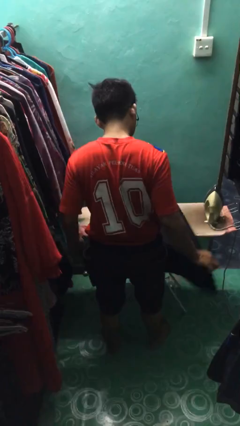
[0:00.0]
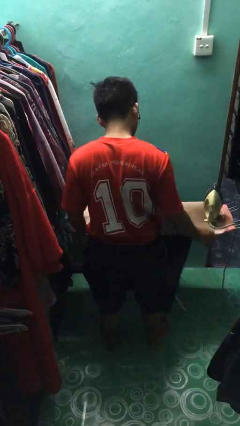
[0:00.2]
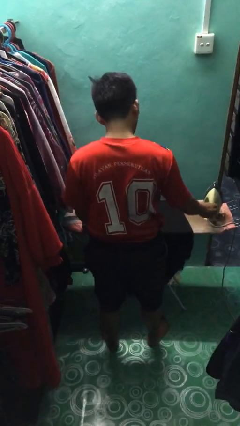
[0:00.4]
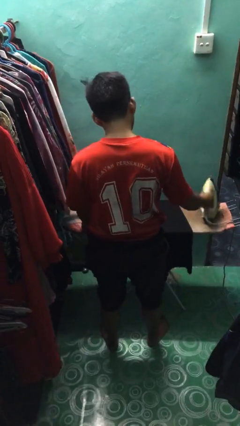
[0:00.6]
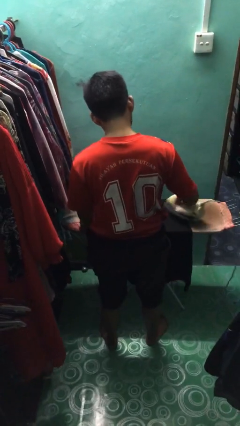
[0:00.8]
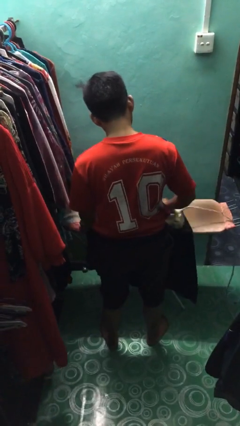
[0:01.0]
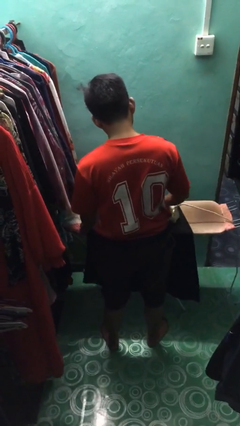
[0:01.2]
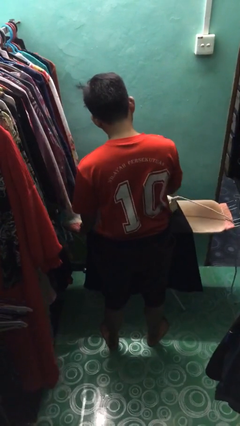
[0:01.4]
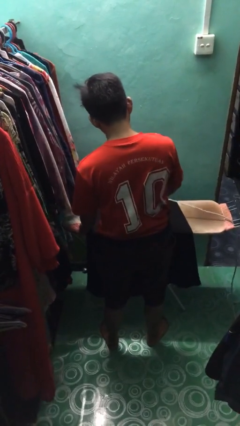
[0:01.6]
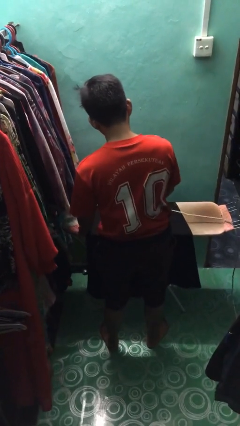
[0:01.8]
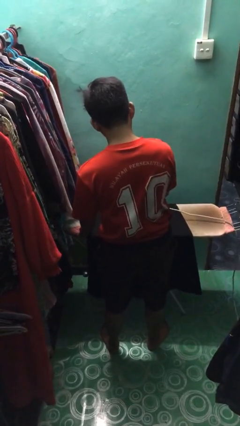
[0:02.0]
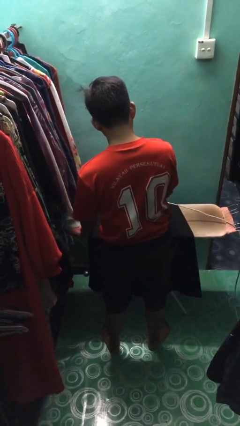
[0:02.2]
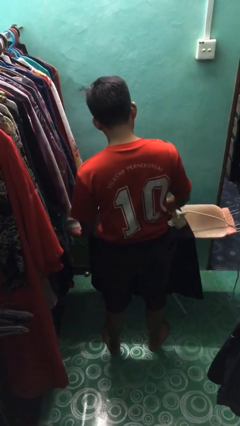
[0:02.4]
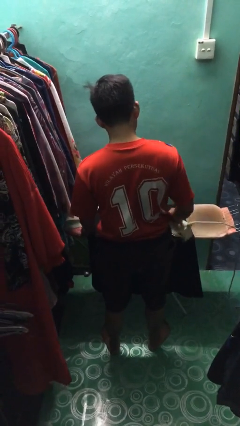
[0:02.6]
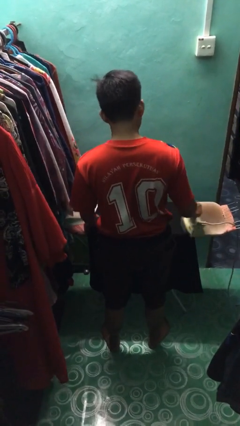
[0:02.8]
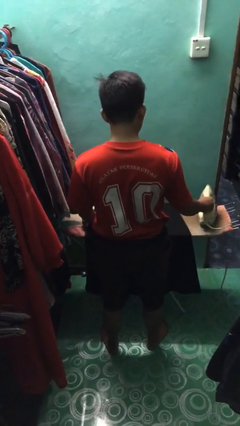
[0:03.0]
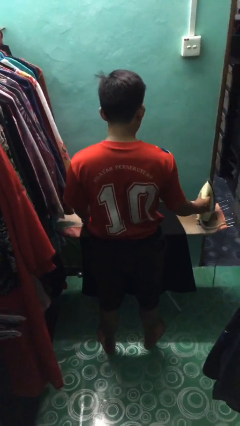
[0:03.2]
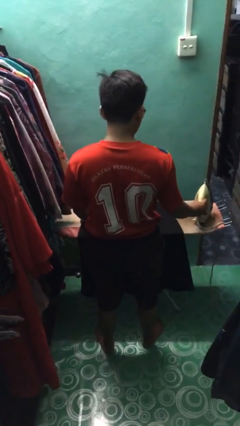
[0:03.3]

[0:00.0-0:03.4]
person irons clothes

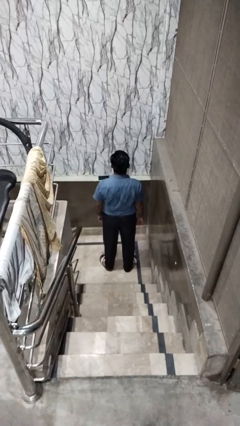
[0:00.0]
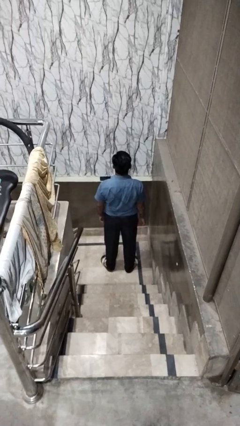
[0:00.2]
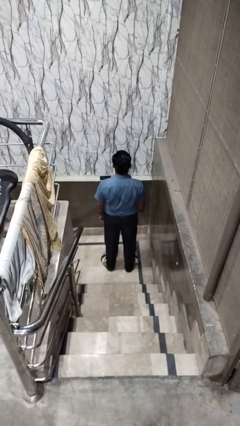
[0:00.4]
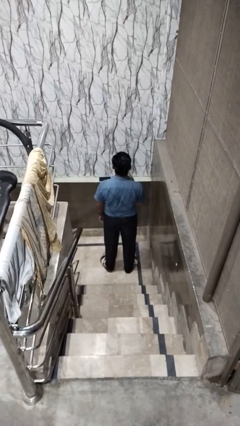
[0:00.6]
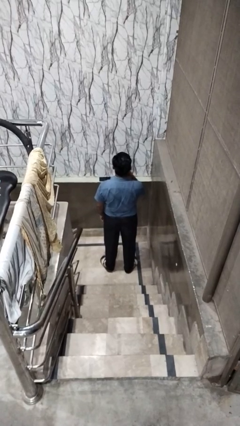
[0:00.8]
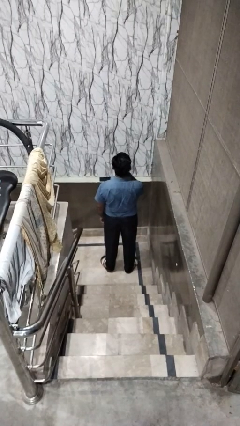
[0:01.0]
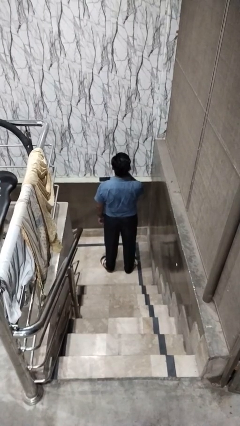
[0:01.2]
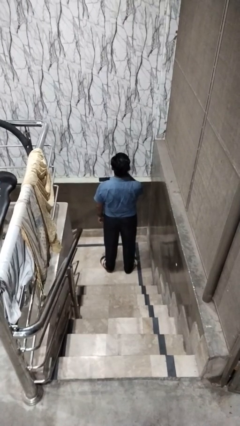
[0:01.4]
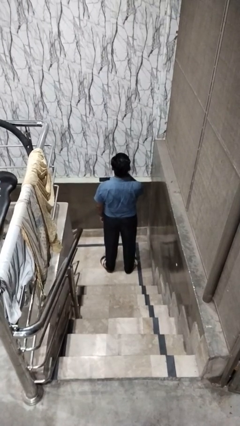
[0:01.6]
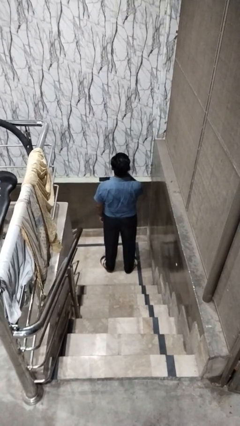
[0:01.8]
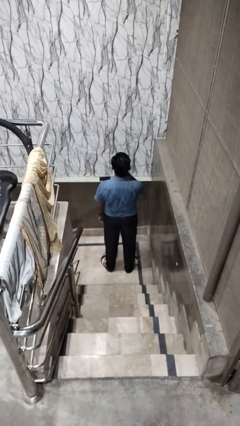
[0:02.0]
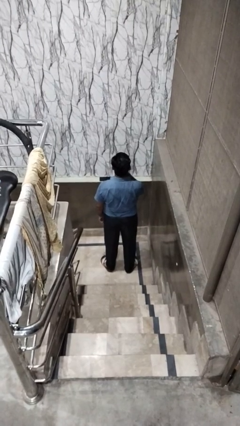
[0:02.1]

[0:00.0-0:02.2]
person gestures be quiet

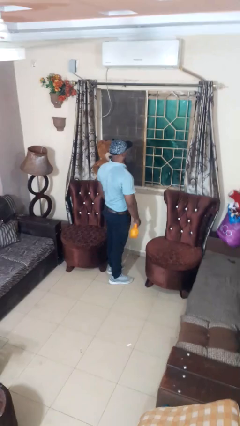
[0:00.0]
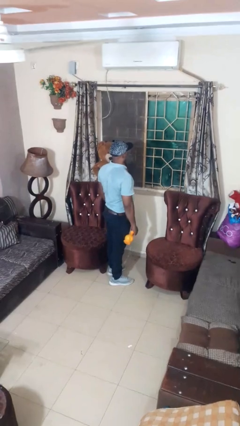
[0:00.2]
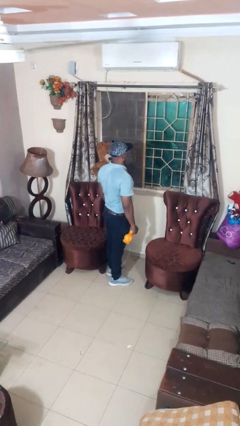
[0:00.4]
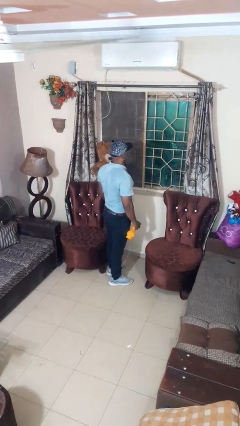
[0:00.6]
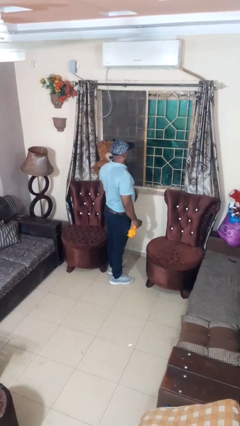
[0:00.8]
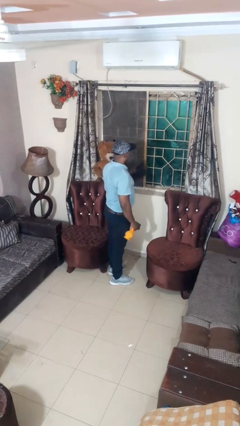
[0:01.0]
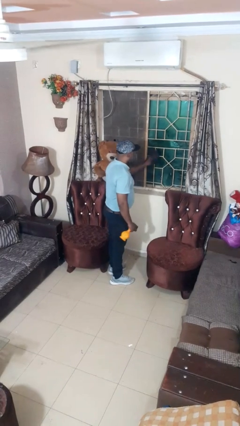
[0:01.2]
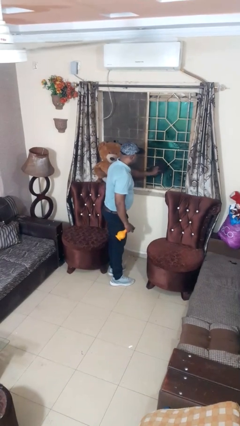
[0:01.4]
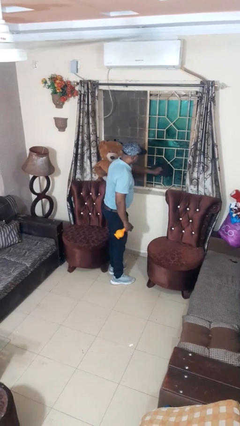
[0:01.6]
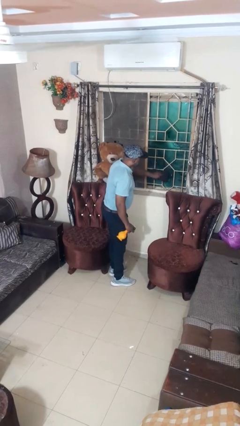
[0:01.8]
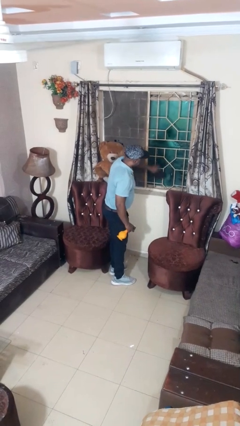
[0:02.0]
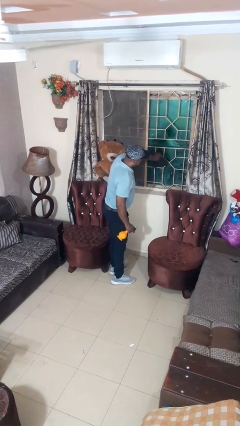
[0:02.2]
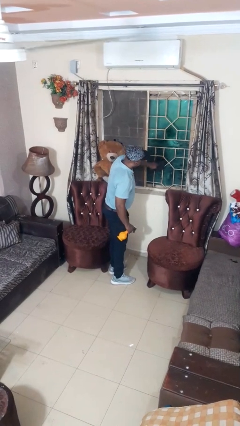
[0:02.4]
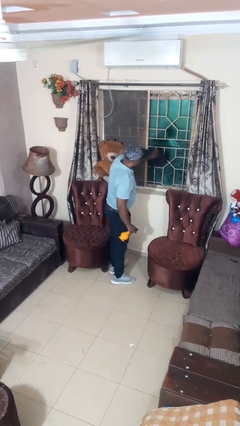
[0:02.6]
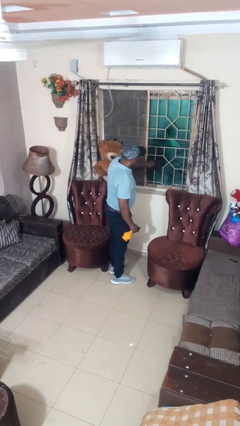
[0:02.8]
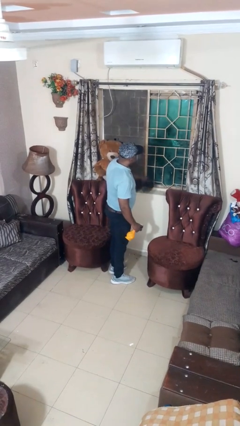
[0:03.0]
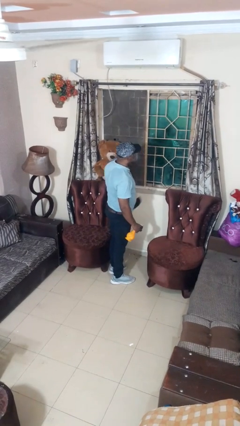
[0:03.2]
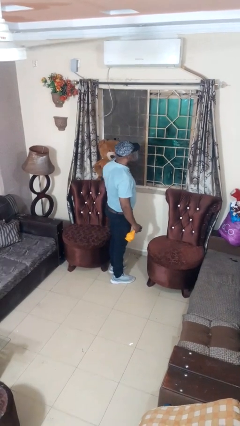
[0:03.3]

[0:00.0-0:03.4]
person washes window

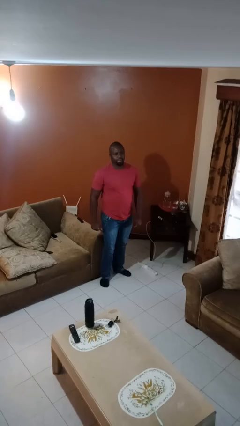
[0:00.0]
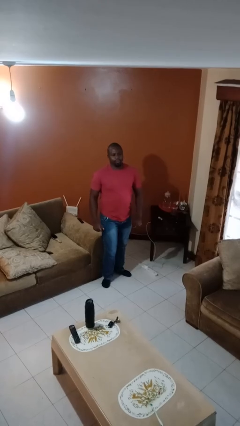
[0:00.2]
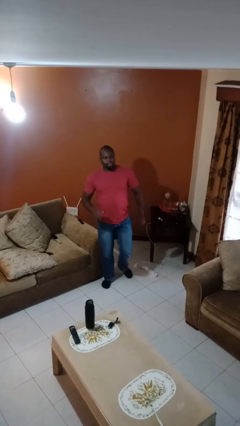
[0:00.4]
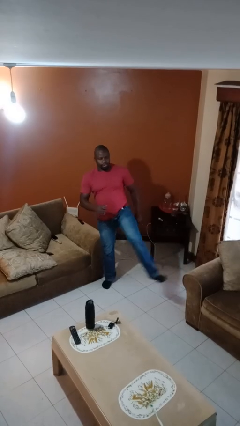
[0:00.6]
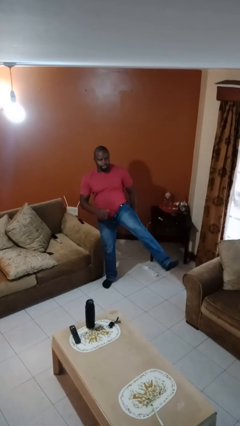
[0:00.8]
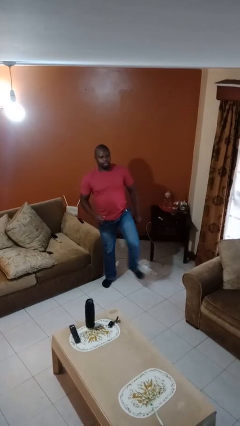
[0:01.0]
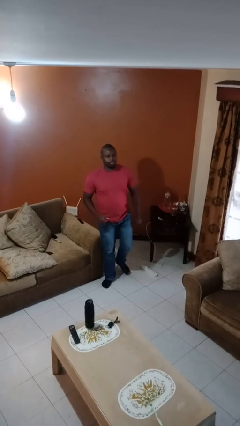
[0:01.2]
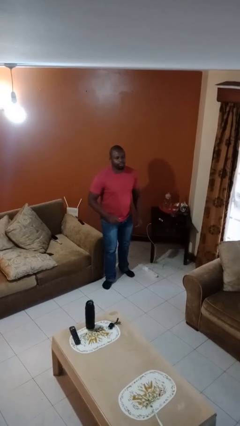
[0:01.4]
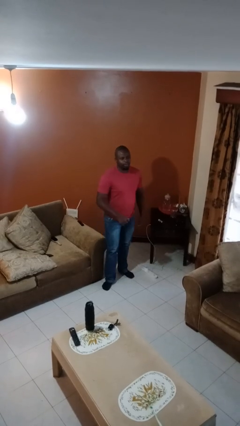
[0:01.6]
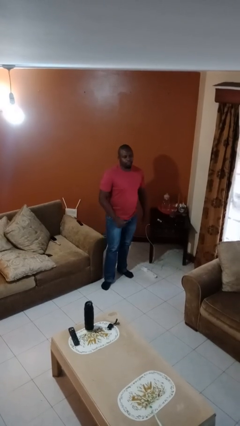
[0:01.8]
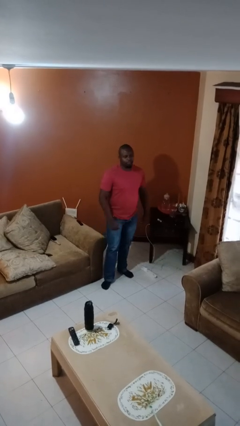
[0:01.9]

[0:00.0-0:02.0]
person karate kicks

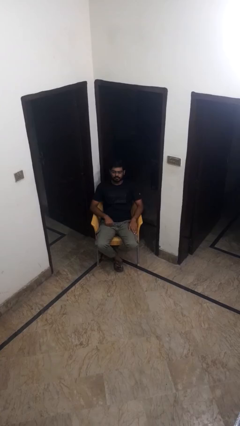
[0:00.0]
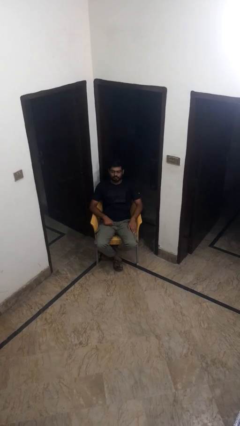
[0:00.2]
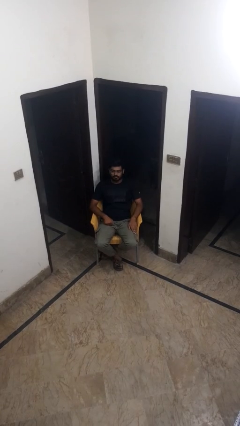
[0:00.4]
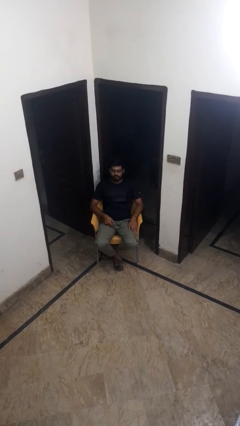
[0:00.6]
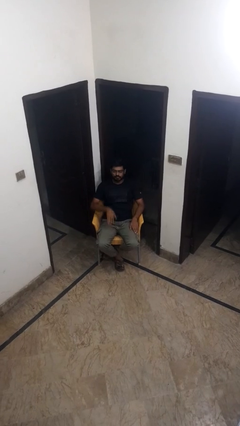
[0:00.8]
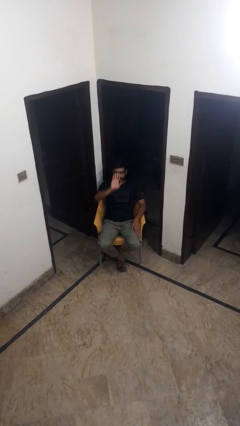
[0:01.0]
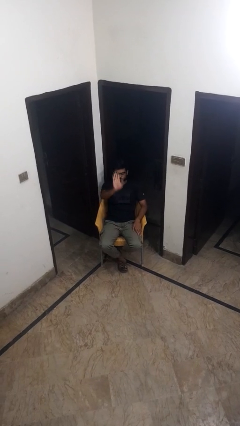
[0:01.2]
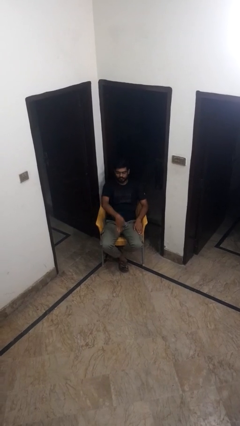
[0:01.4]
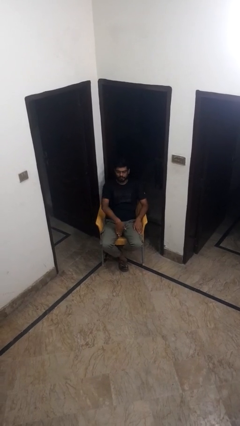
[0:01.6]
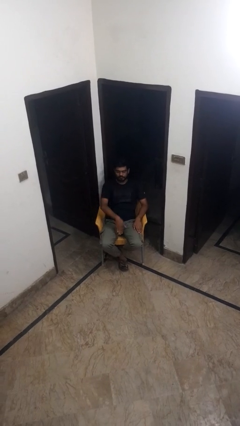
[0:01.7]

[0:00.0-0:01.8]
person gestures swipe down

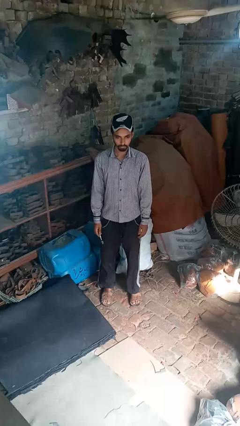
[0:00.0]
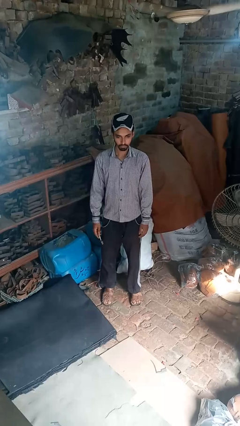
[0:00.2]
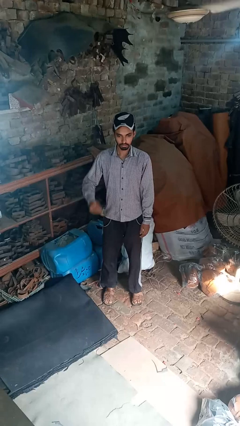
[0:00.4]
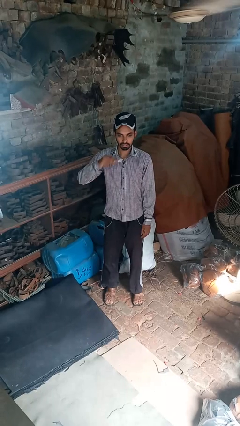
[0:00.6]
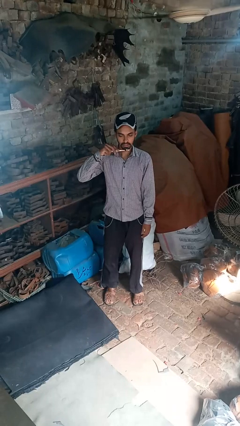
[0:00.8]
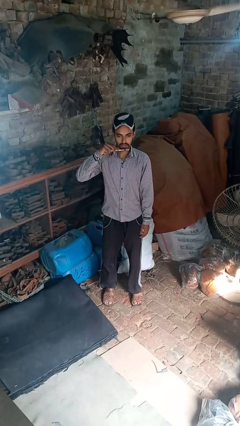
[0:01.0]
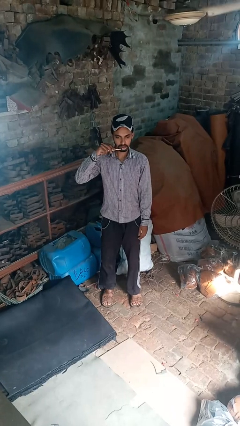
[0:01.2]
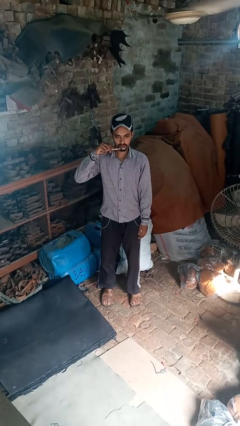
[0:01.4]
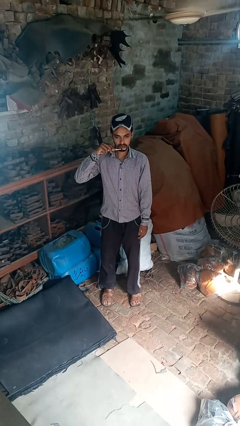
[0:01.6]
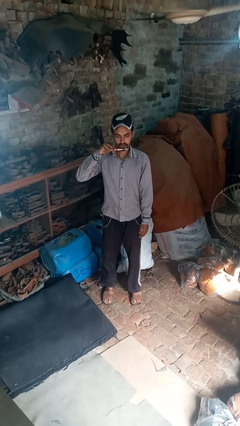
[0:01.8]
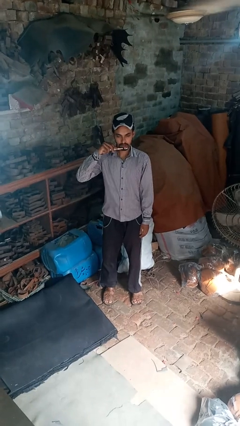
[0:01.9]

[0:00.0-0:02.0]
person brushes teeth

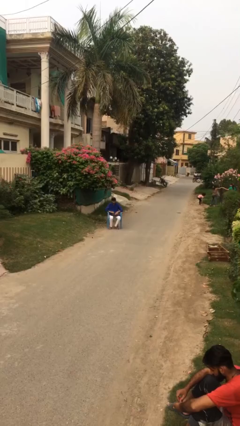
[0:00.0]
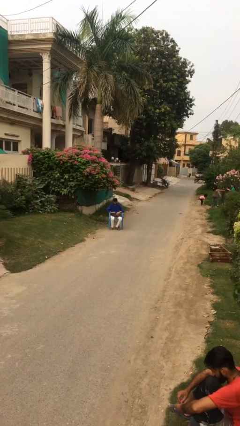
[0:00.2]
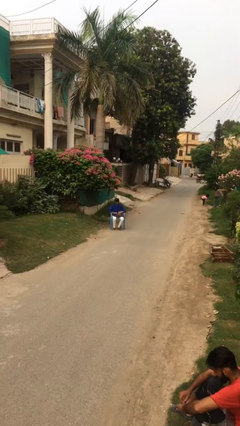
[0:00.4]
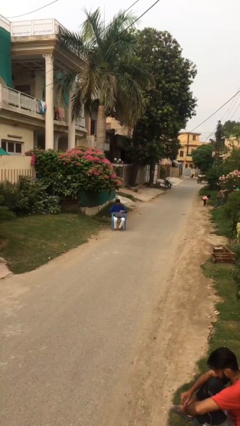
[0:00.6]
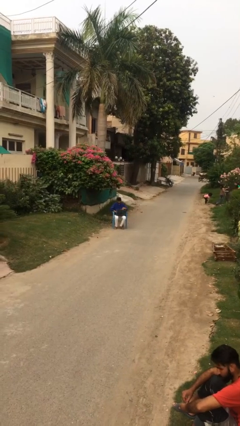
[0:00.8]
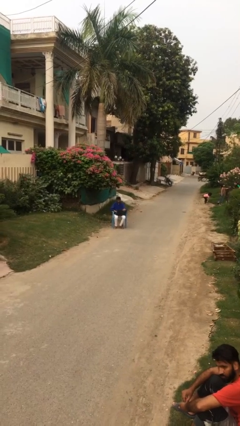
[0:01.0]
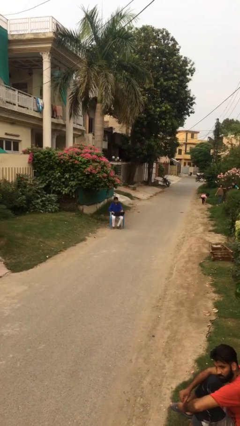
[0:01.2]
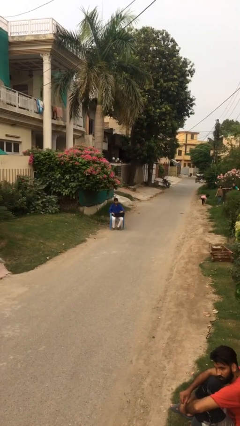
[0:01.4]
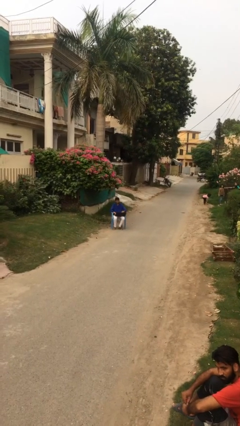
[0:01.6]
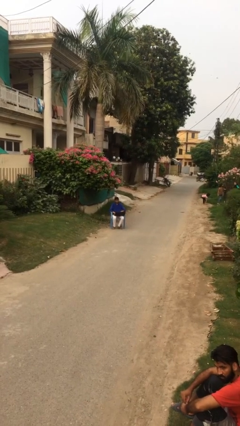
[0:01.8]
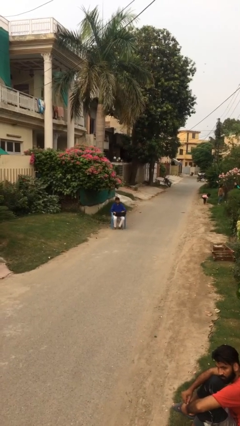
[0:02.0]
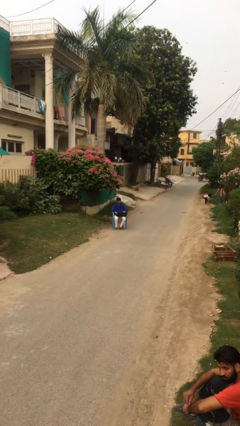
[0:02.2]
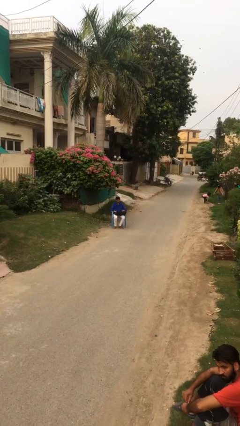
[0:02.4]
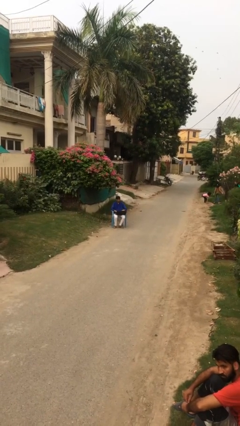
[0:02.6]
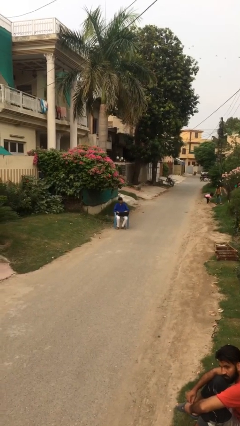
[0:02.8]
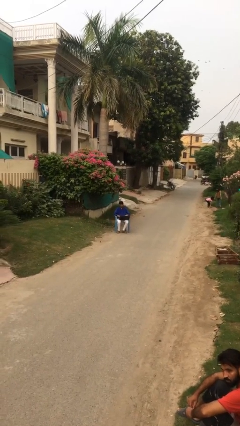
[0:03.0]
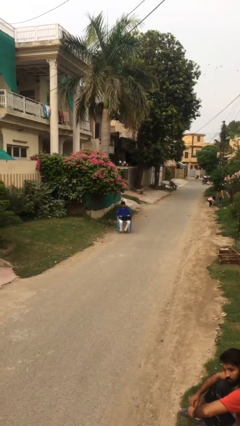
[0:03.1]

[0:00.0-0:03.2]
person interacts with laptop
